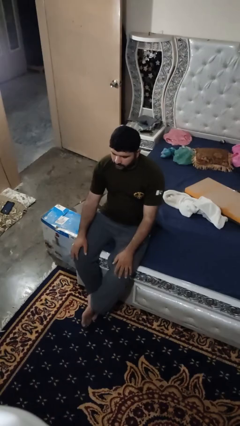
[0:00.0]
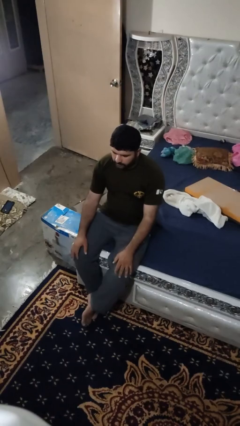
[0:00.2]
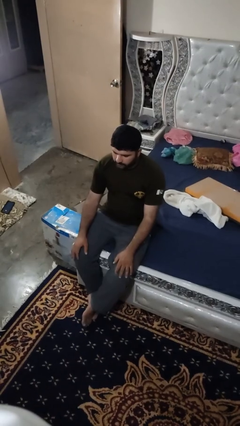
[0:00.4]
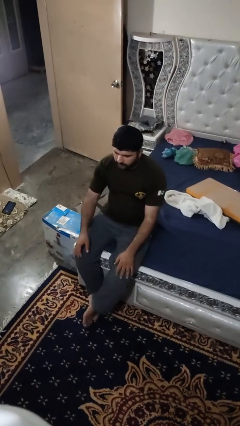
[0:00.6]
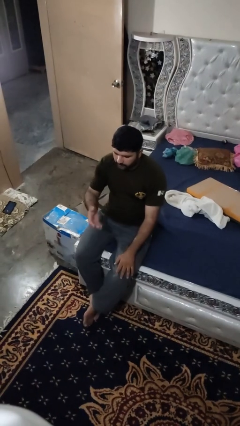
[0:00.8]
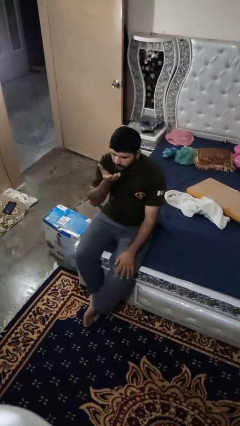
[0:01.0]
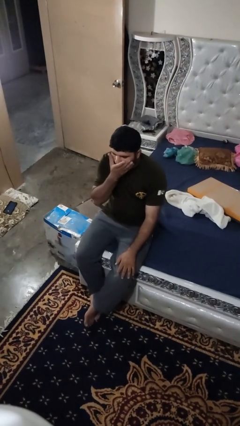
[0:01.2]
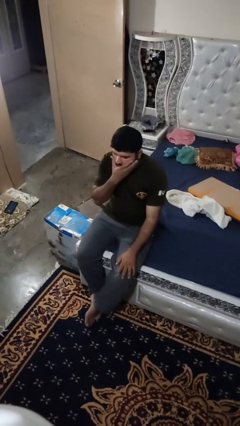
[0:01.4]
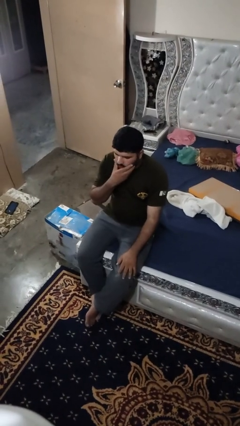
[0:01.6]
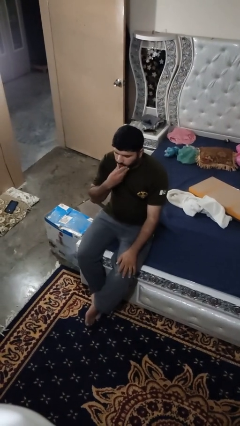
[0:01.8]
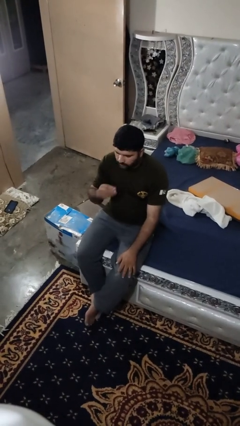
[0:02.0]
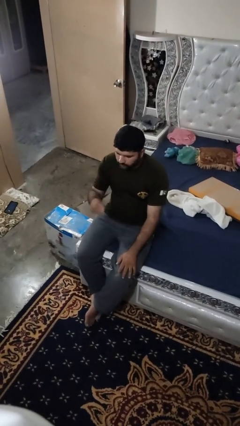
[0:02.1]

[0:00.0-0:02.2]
person strokes chin

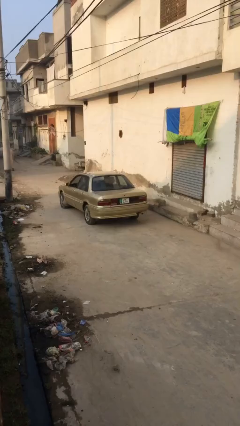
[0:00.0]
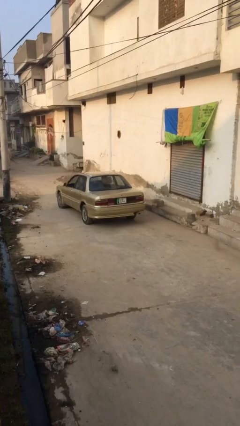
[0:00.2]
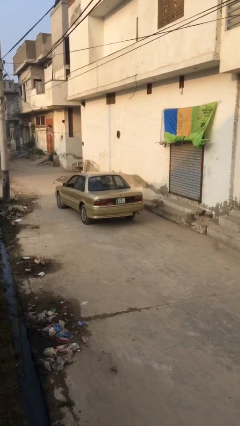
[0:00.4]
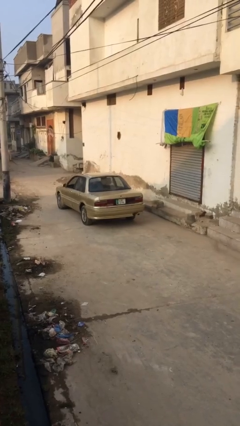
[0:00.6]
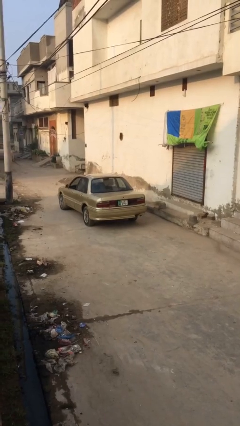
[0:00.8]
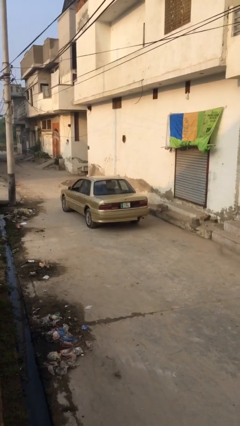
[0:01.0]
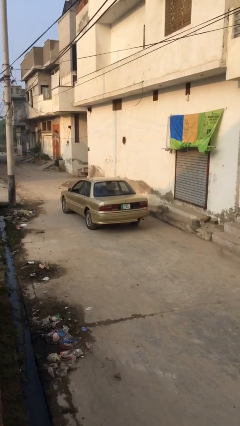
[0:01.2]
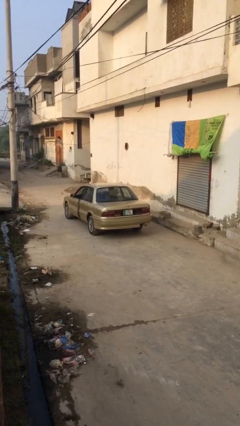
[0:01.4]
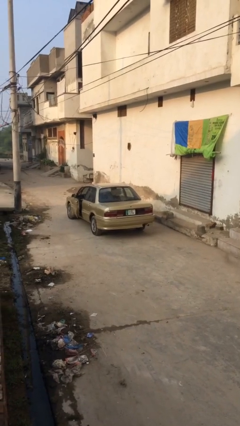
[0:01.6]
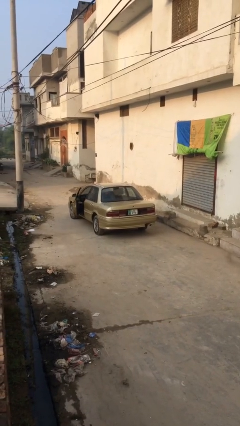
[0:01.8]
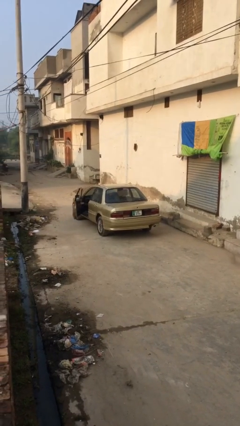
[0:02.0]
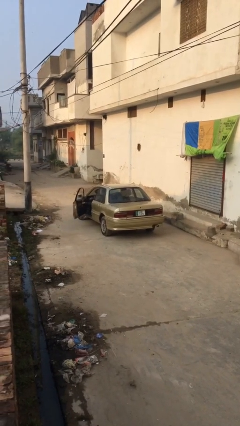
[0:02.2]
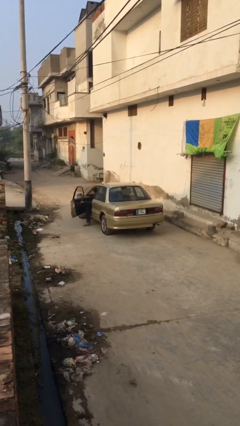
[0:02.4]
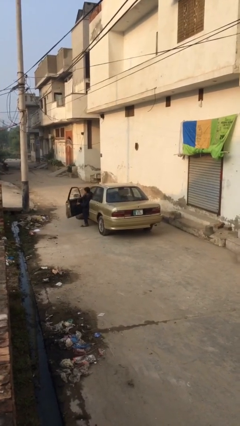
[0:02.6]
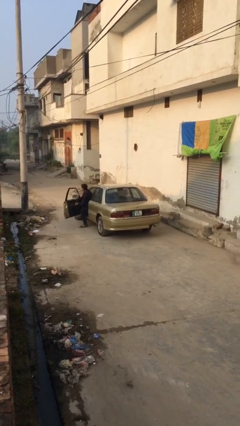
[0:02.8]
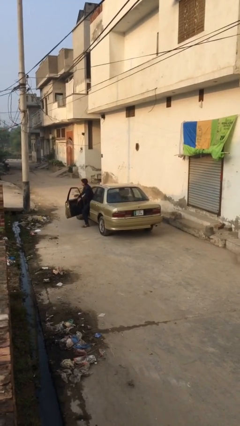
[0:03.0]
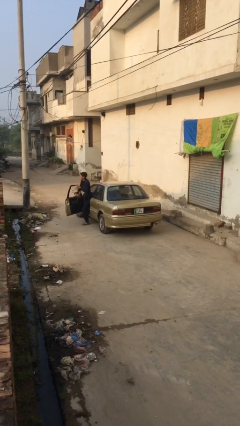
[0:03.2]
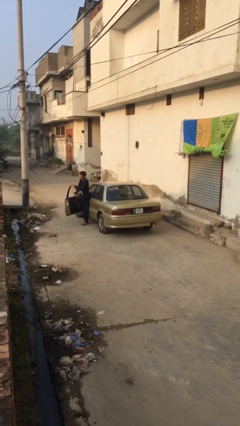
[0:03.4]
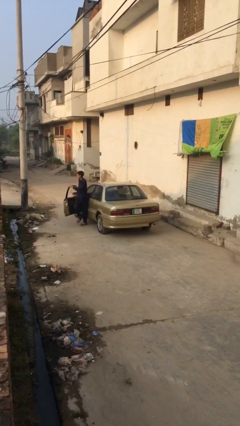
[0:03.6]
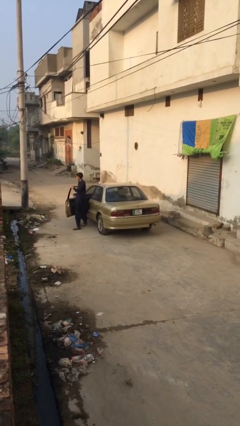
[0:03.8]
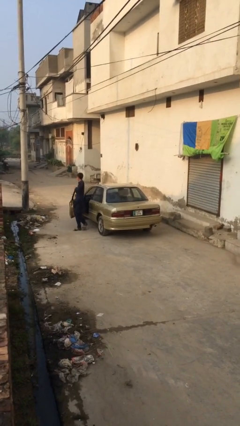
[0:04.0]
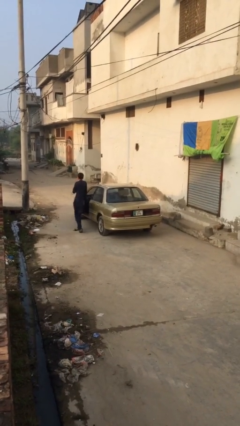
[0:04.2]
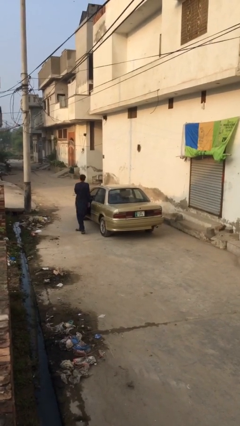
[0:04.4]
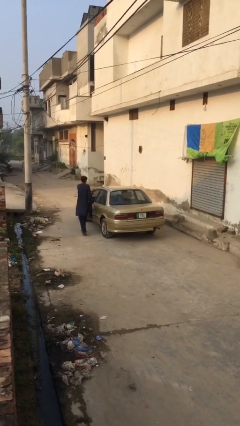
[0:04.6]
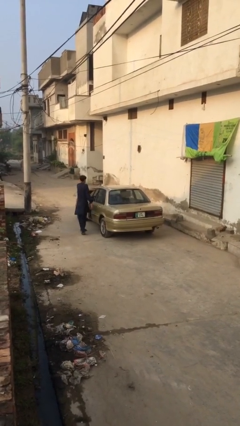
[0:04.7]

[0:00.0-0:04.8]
car drops off person

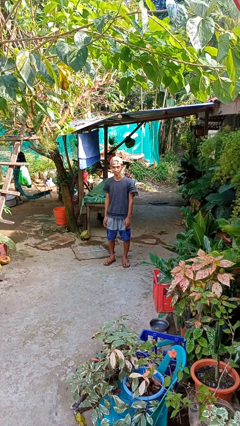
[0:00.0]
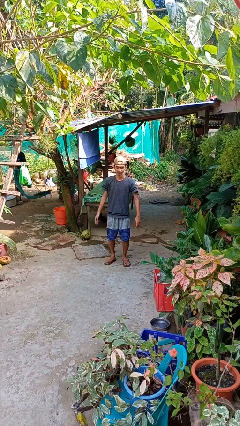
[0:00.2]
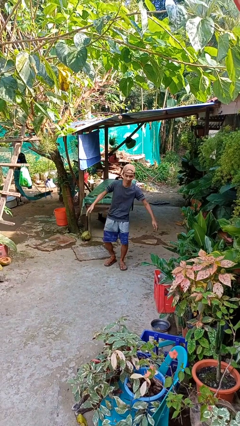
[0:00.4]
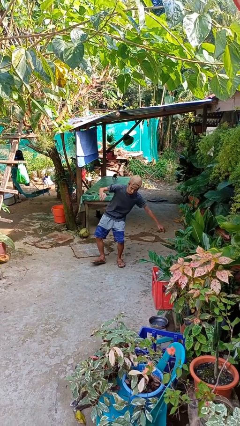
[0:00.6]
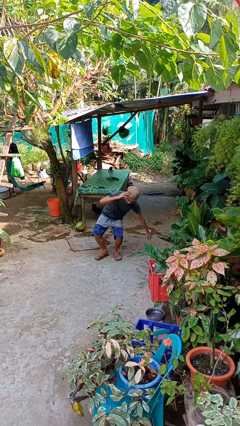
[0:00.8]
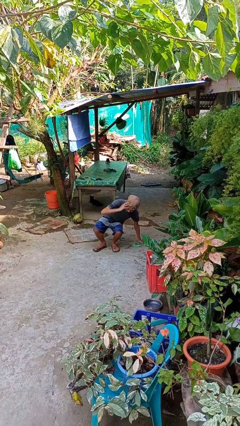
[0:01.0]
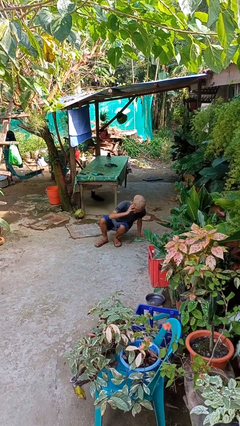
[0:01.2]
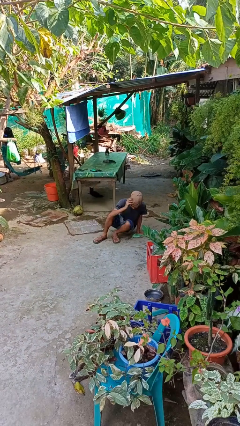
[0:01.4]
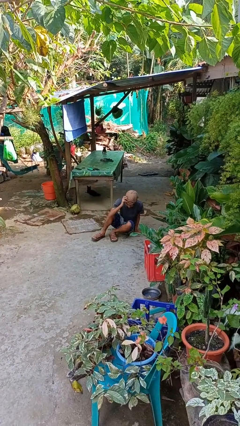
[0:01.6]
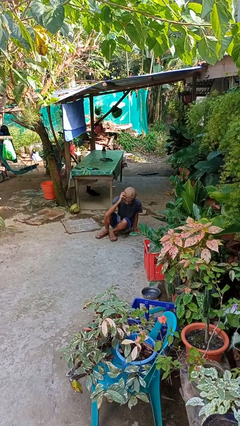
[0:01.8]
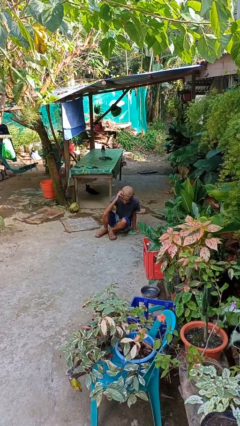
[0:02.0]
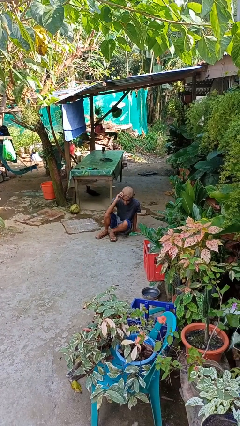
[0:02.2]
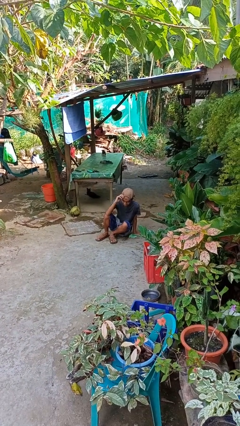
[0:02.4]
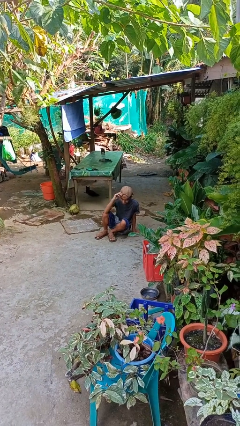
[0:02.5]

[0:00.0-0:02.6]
person falls while standing

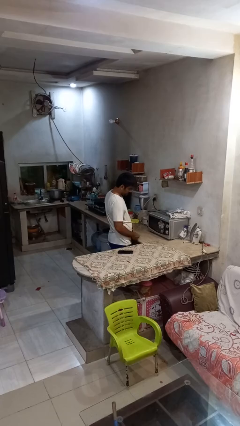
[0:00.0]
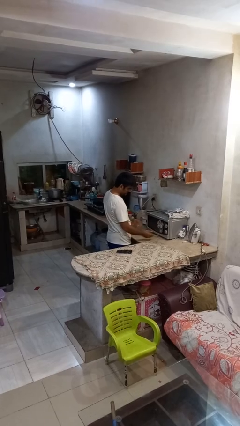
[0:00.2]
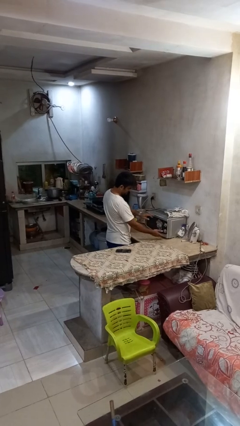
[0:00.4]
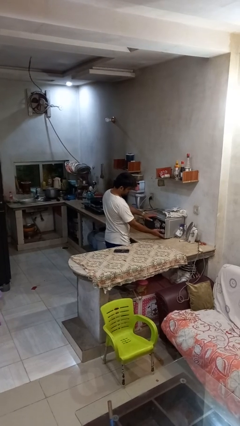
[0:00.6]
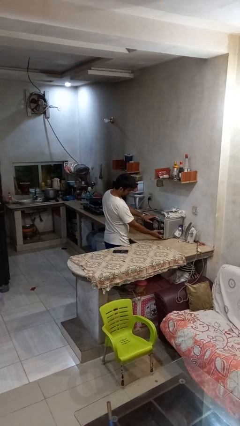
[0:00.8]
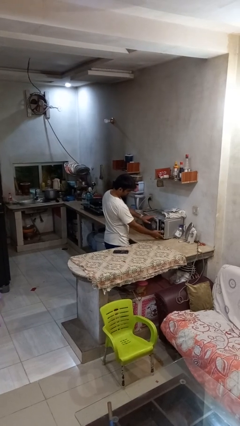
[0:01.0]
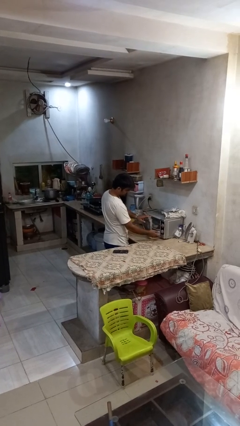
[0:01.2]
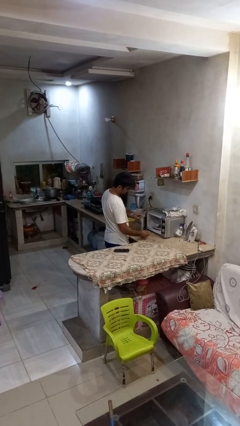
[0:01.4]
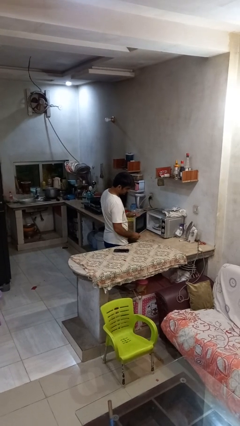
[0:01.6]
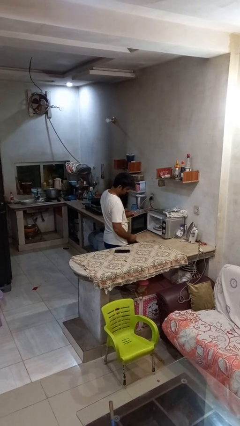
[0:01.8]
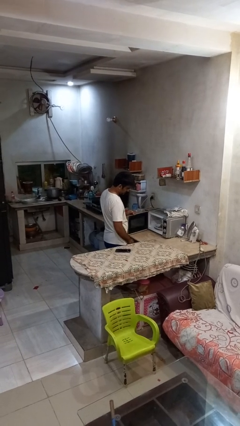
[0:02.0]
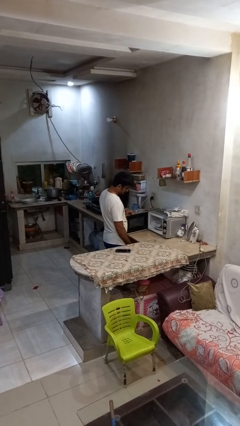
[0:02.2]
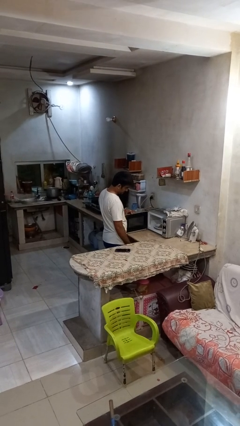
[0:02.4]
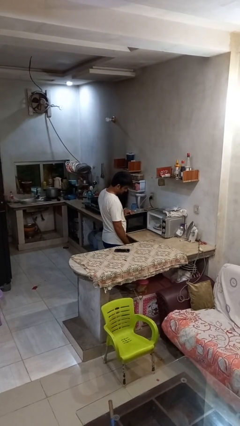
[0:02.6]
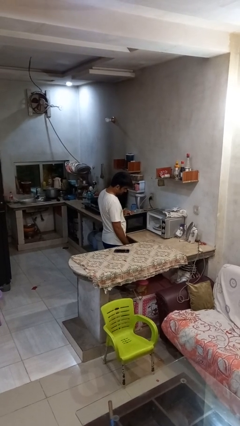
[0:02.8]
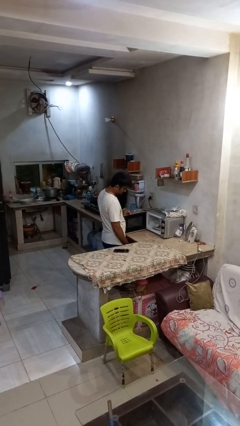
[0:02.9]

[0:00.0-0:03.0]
person opens microwave

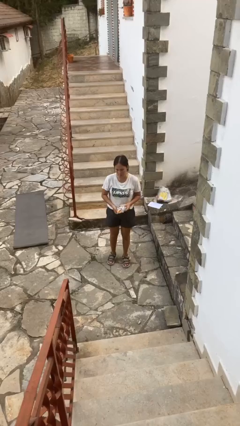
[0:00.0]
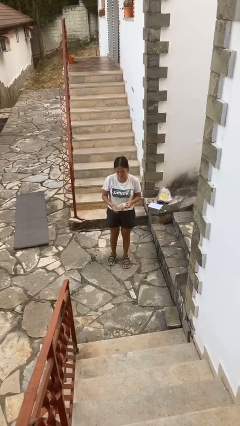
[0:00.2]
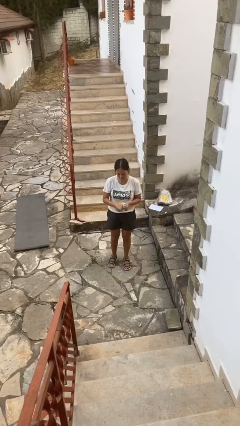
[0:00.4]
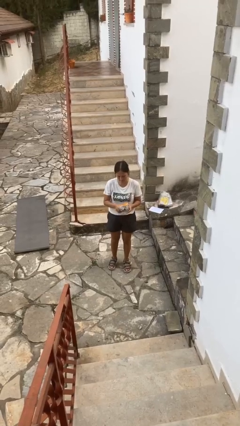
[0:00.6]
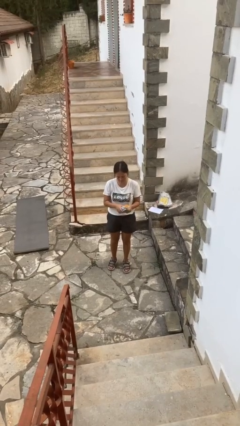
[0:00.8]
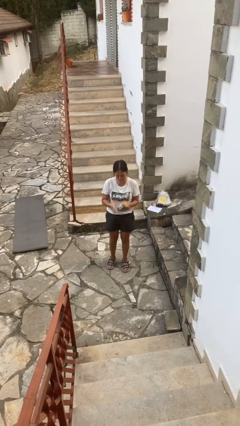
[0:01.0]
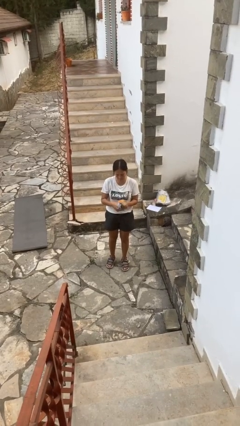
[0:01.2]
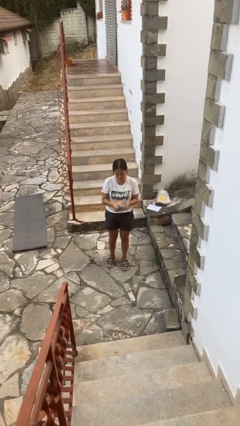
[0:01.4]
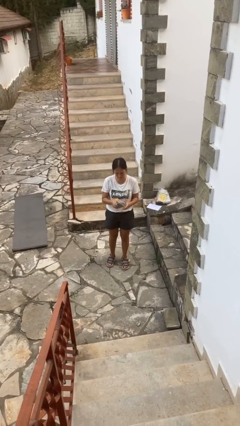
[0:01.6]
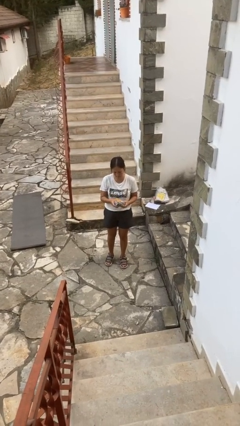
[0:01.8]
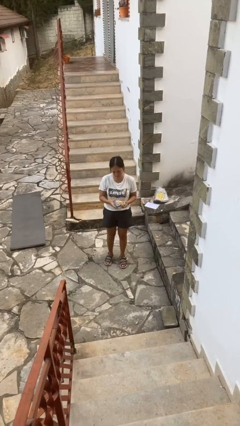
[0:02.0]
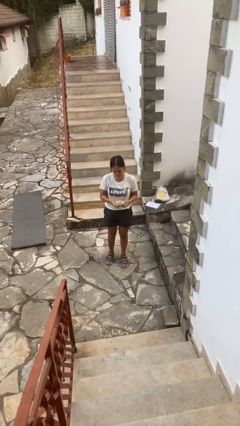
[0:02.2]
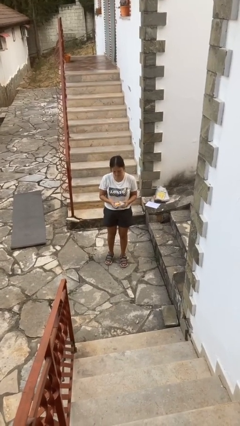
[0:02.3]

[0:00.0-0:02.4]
person squeezes object

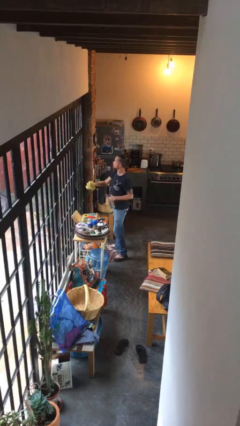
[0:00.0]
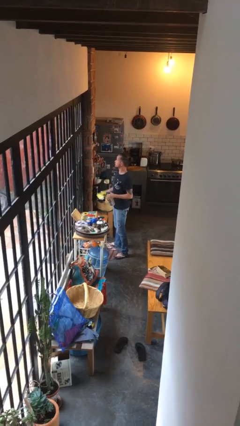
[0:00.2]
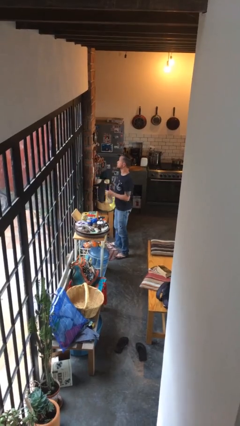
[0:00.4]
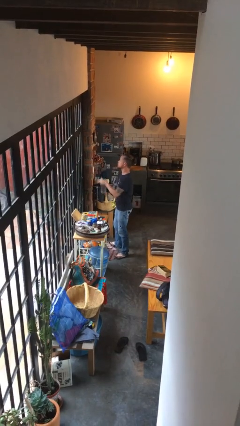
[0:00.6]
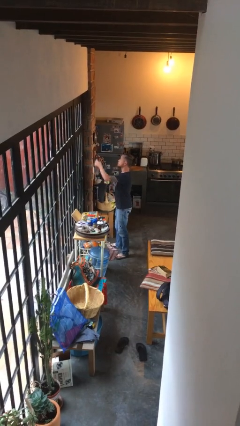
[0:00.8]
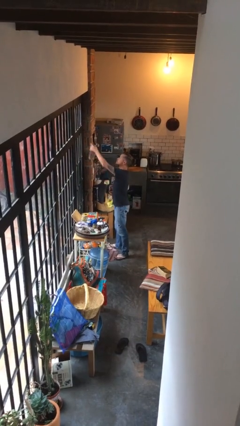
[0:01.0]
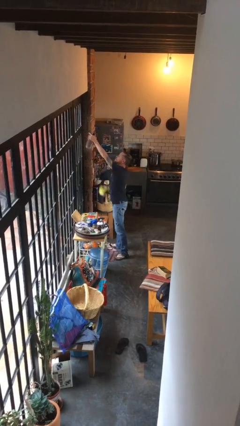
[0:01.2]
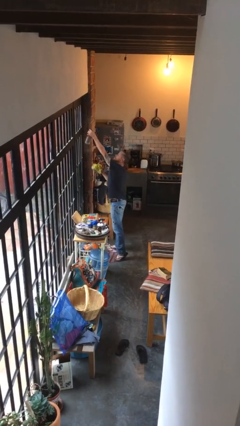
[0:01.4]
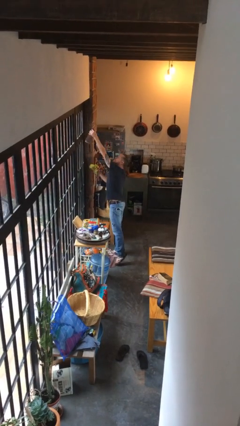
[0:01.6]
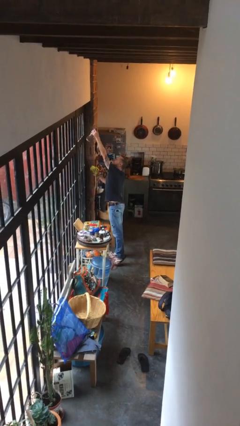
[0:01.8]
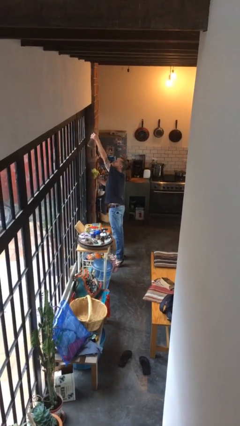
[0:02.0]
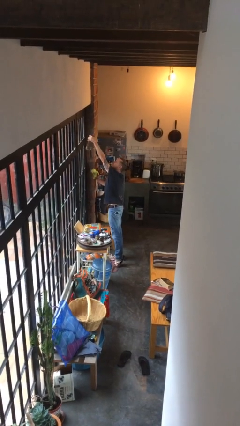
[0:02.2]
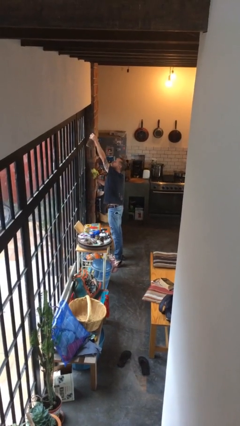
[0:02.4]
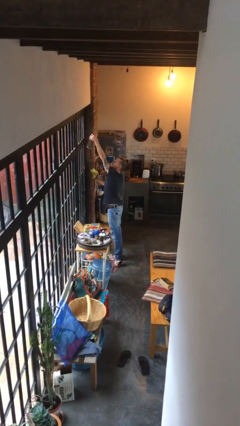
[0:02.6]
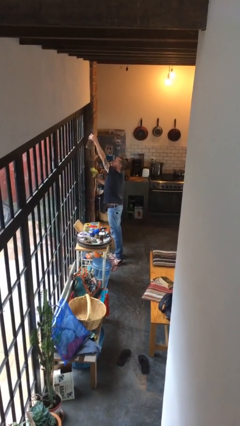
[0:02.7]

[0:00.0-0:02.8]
person sprays from bottle
